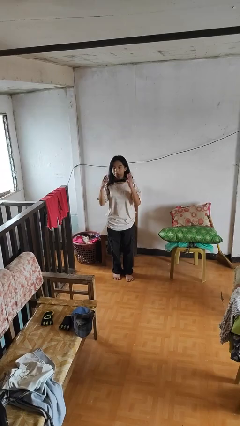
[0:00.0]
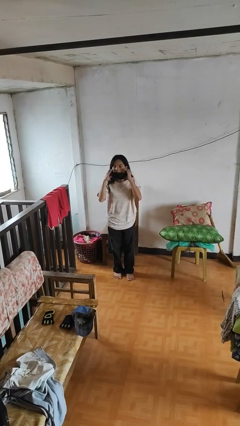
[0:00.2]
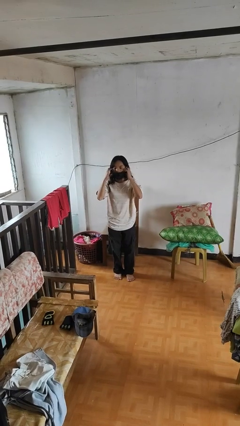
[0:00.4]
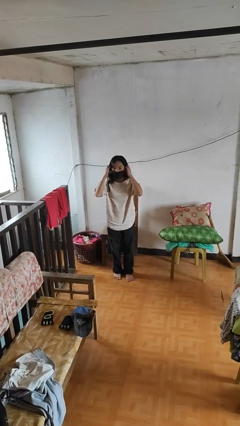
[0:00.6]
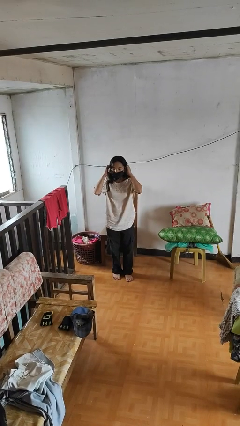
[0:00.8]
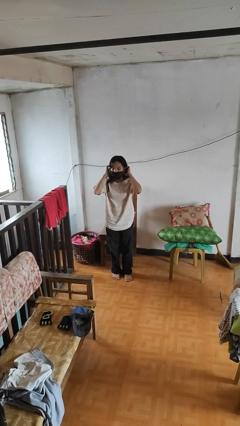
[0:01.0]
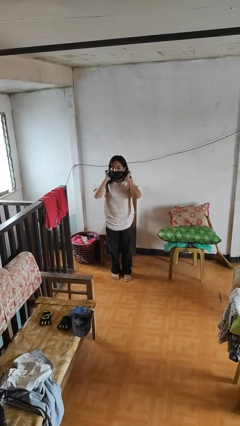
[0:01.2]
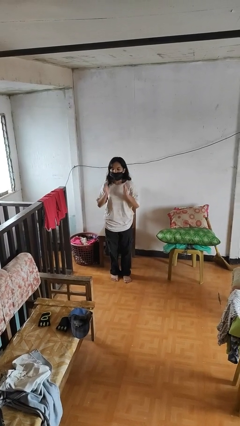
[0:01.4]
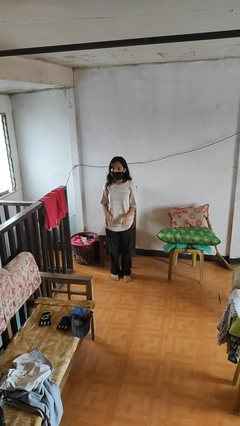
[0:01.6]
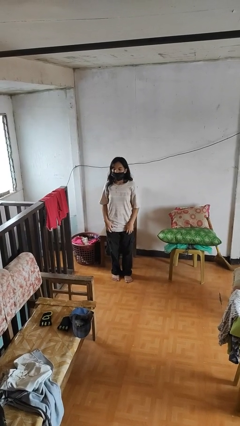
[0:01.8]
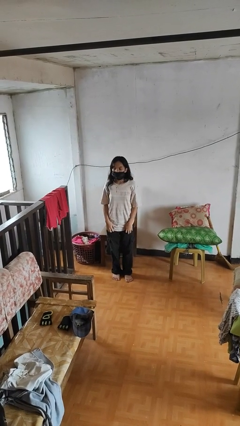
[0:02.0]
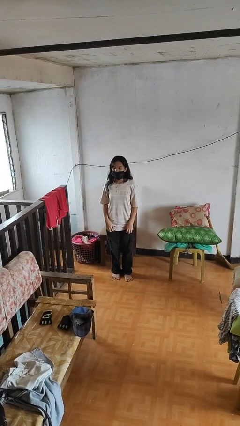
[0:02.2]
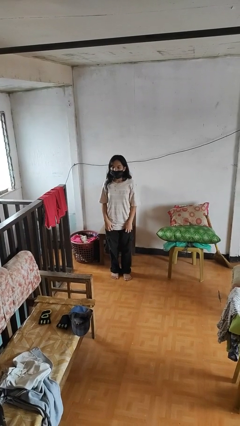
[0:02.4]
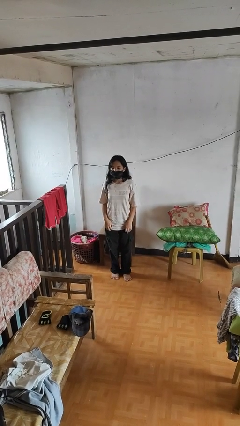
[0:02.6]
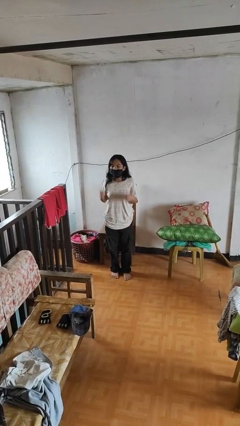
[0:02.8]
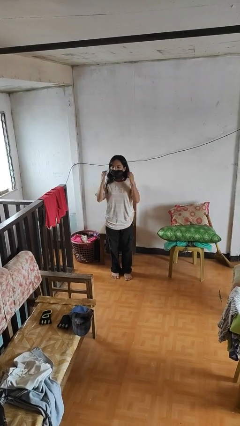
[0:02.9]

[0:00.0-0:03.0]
person puts on facemask

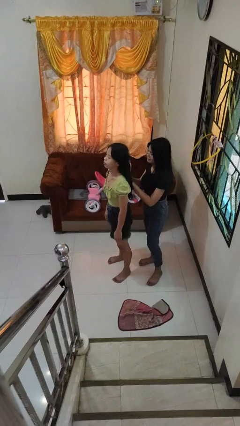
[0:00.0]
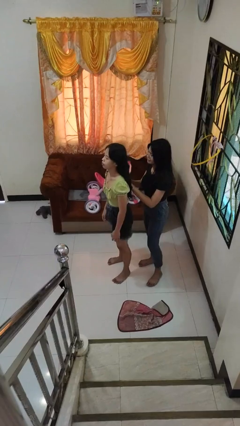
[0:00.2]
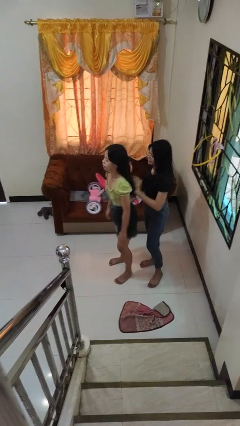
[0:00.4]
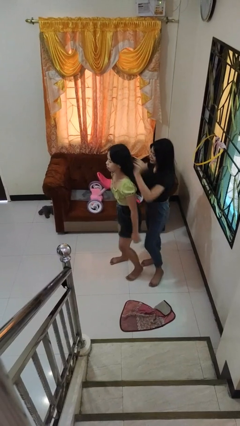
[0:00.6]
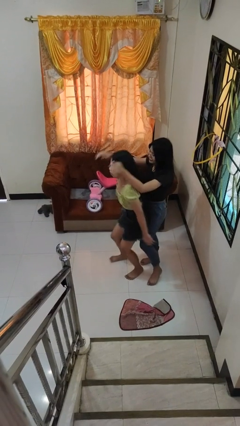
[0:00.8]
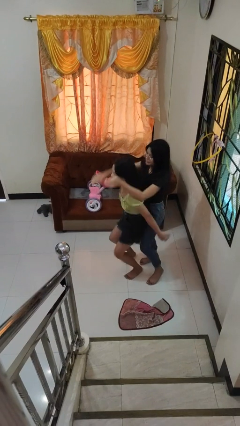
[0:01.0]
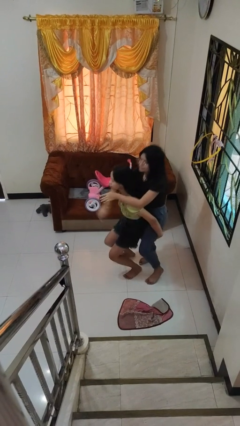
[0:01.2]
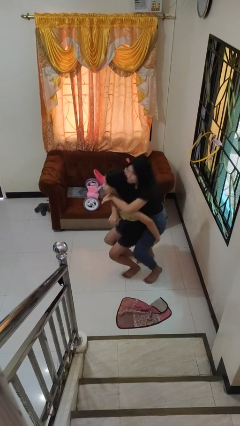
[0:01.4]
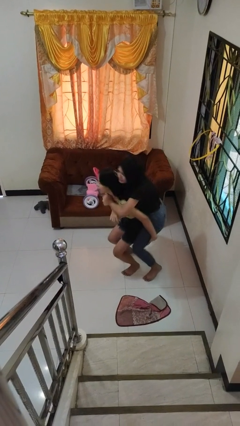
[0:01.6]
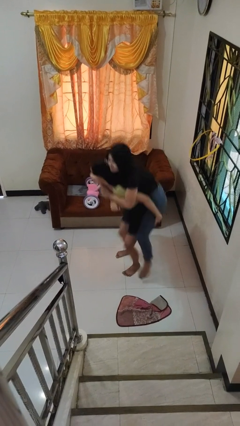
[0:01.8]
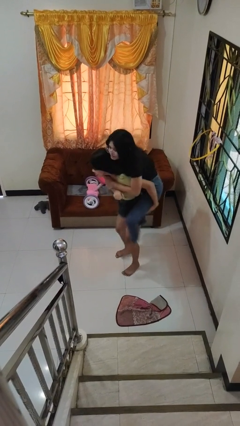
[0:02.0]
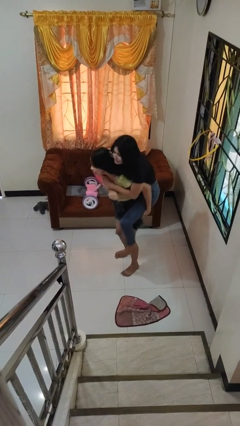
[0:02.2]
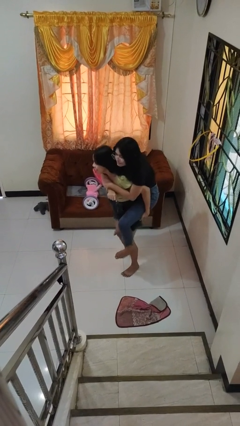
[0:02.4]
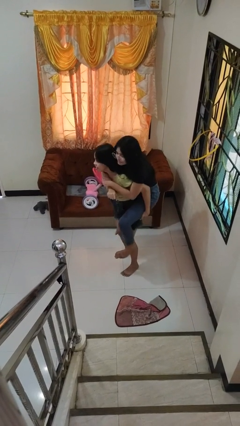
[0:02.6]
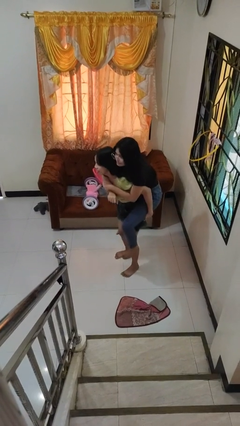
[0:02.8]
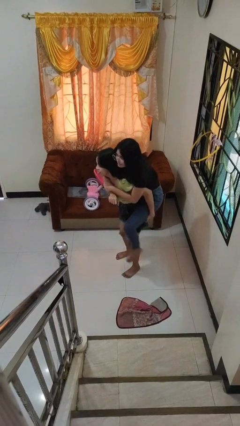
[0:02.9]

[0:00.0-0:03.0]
person carries person over shoulder

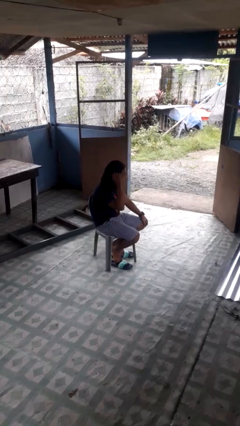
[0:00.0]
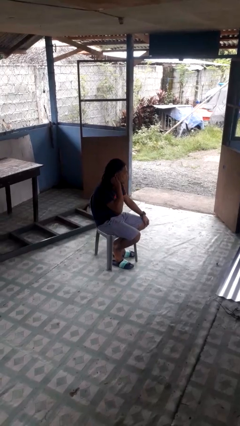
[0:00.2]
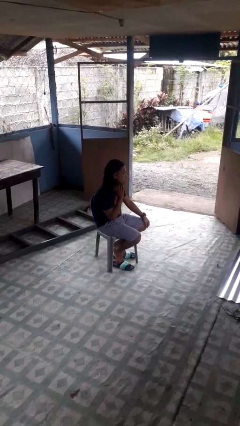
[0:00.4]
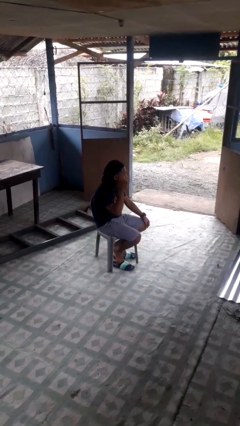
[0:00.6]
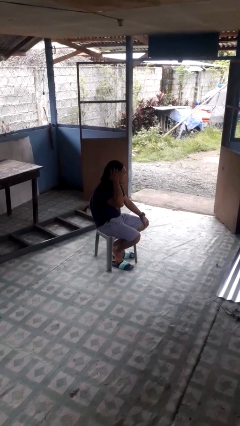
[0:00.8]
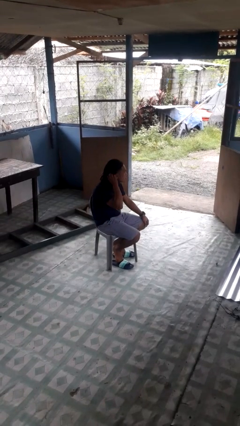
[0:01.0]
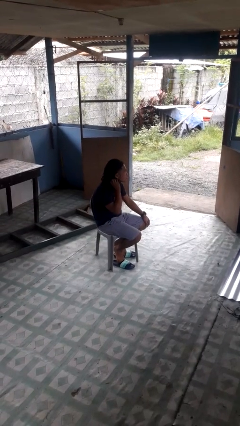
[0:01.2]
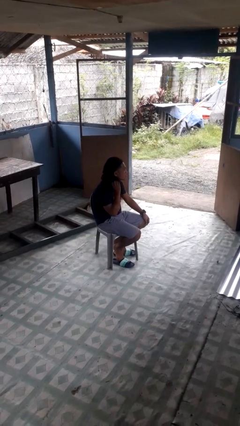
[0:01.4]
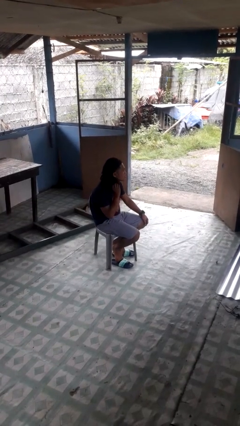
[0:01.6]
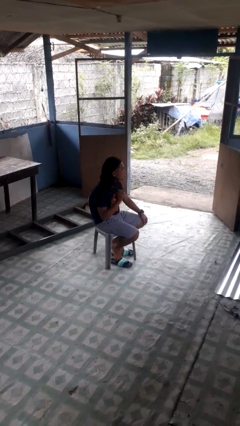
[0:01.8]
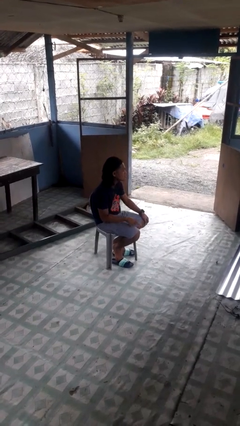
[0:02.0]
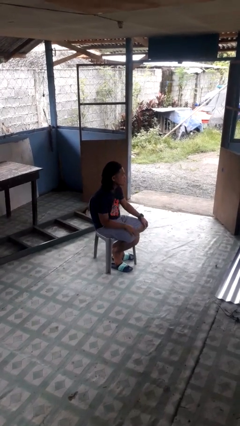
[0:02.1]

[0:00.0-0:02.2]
person strokes hair

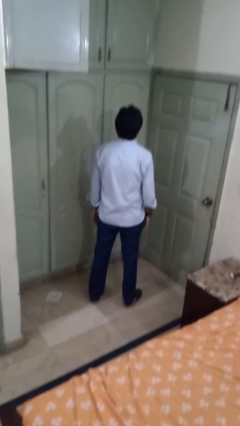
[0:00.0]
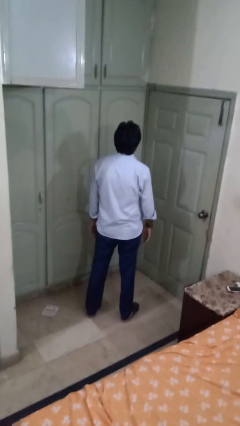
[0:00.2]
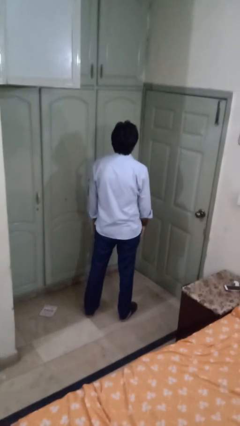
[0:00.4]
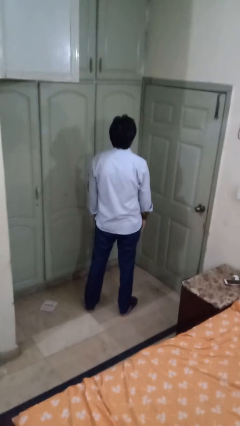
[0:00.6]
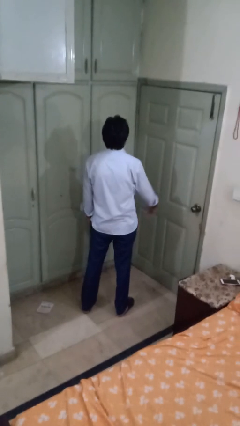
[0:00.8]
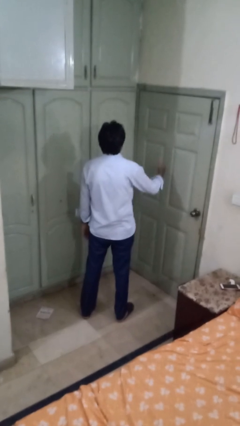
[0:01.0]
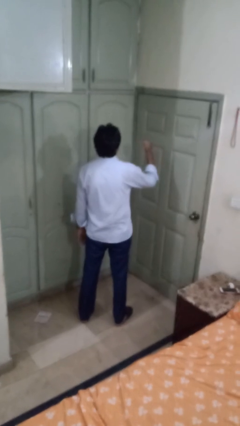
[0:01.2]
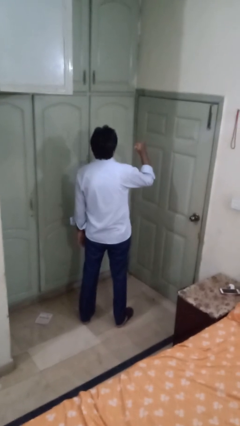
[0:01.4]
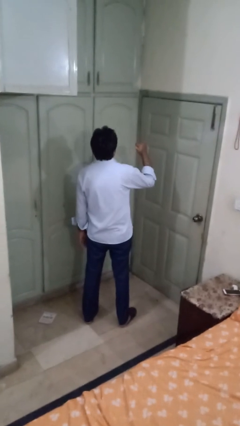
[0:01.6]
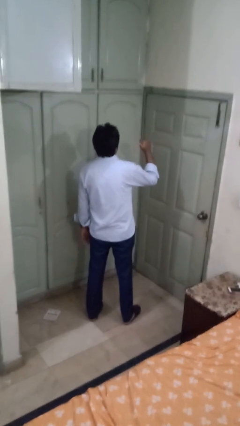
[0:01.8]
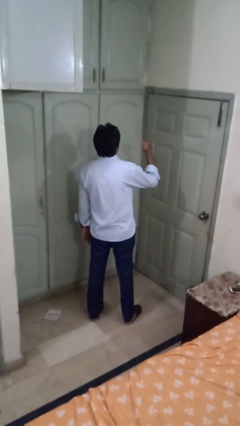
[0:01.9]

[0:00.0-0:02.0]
person gestures behind me

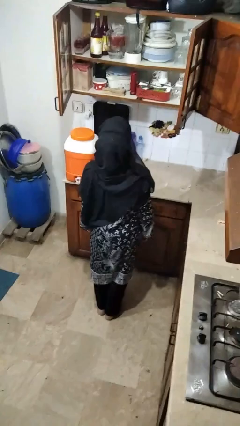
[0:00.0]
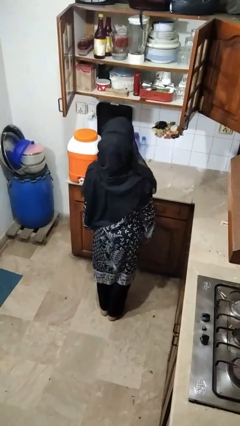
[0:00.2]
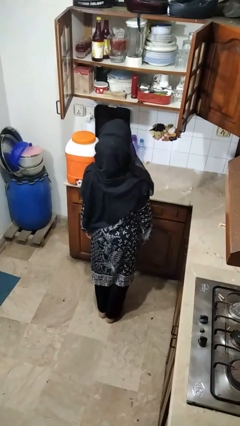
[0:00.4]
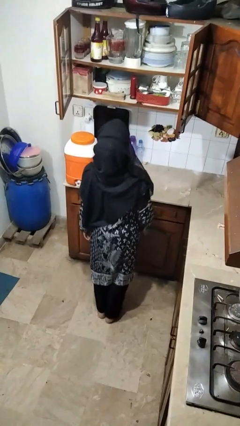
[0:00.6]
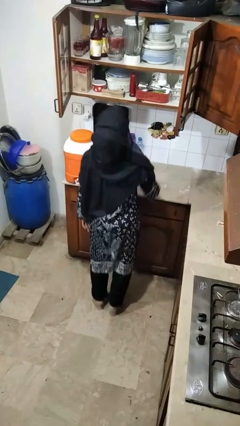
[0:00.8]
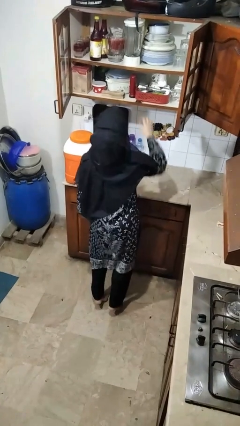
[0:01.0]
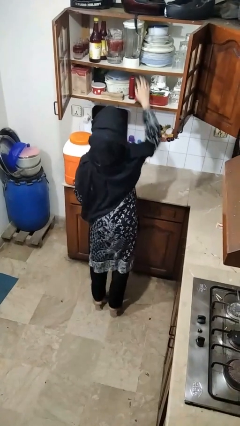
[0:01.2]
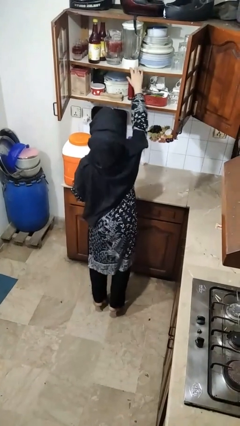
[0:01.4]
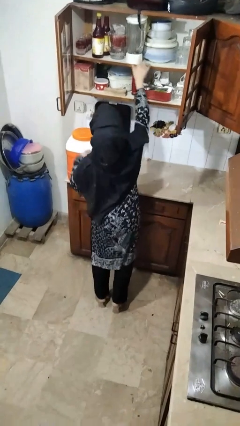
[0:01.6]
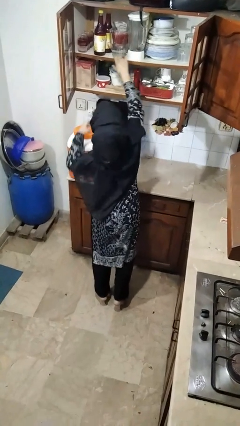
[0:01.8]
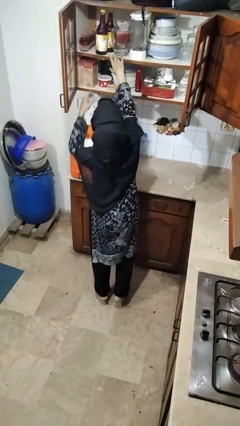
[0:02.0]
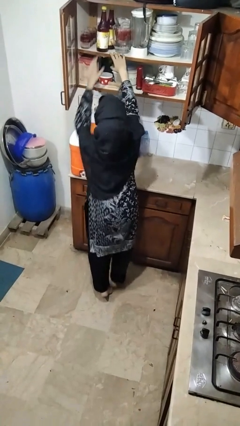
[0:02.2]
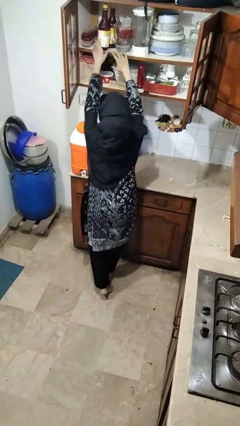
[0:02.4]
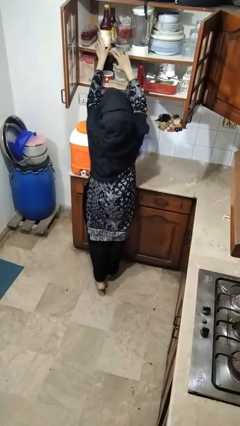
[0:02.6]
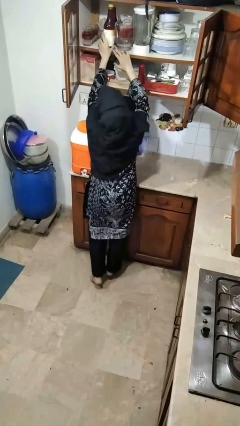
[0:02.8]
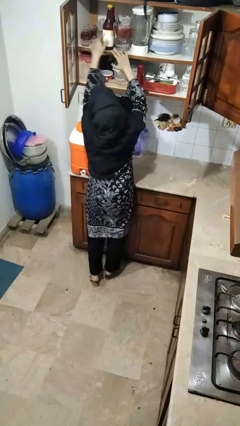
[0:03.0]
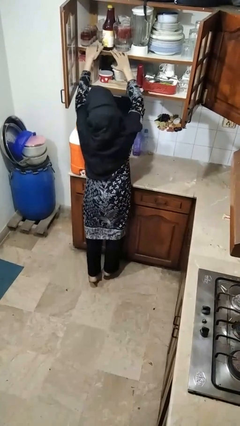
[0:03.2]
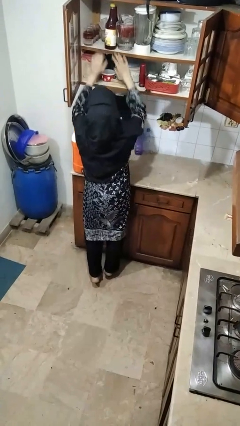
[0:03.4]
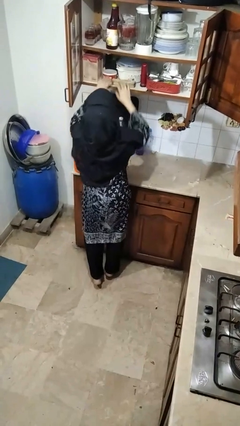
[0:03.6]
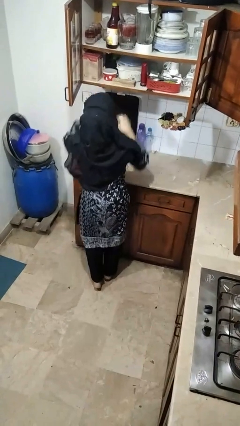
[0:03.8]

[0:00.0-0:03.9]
person searches in cabinet

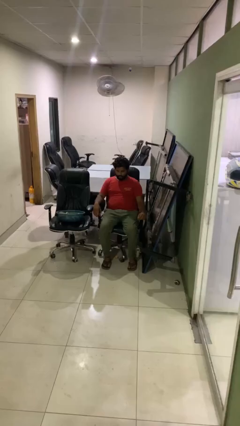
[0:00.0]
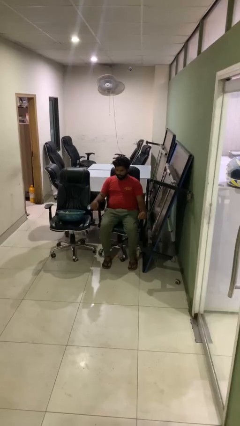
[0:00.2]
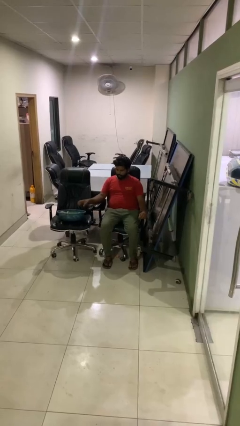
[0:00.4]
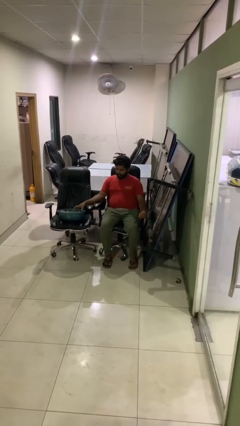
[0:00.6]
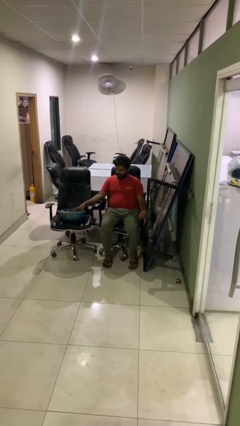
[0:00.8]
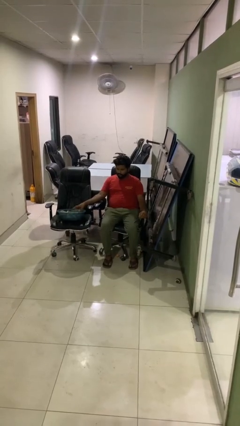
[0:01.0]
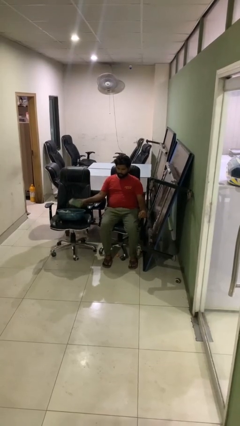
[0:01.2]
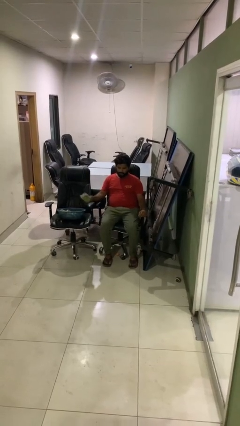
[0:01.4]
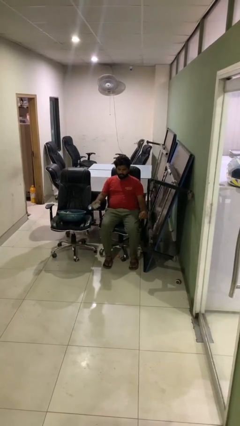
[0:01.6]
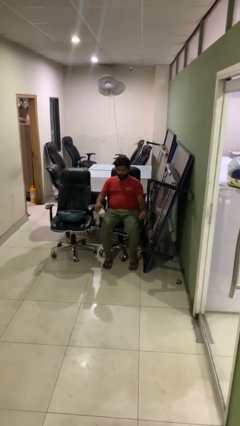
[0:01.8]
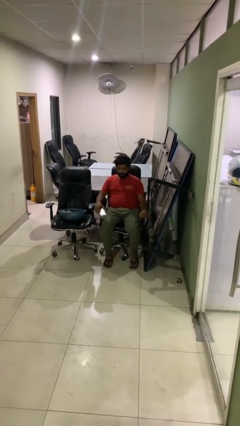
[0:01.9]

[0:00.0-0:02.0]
person takes object from basket

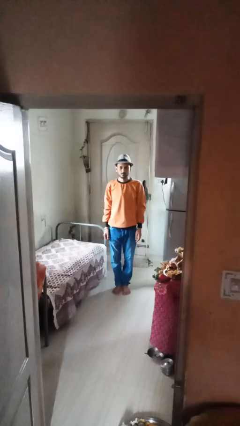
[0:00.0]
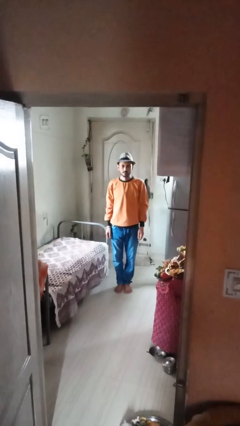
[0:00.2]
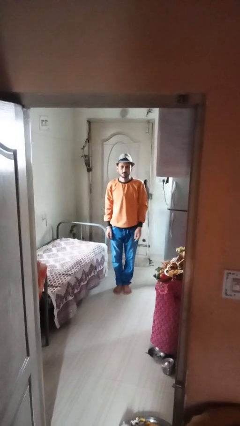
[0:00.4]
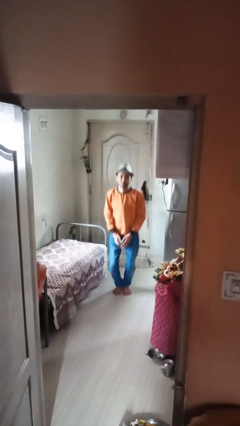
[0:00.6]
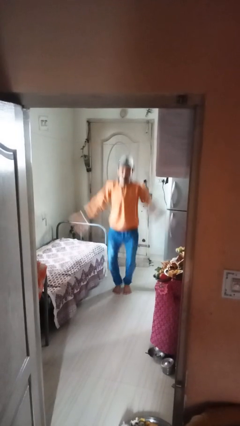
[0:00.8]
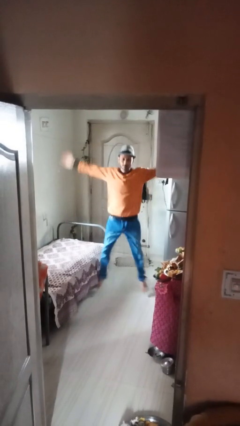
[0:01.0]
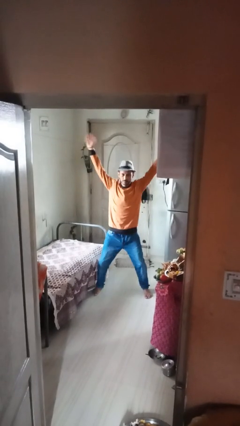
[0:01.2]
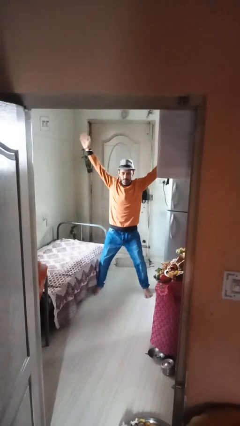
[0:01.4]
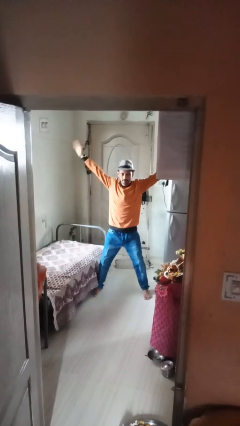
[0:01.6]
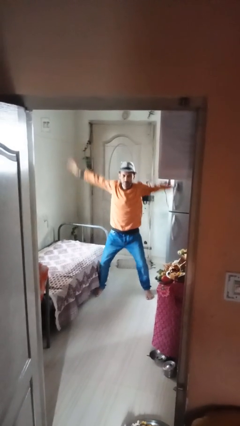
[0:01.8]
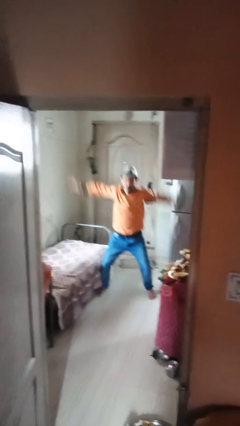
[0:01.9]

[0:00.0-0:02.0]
person exercises with jumping jacks
